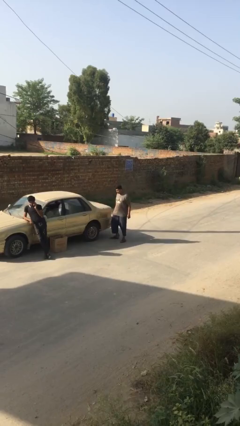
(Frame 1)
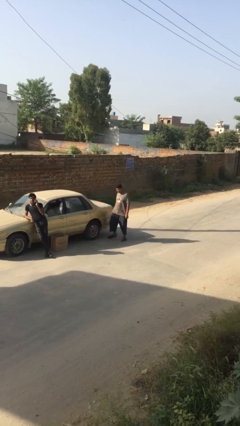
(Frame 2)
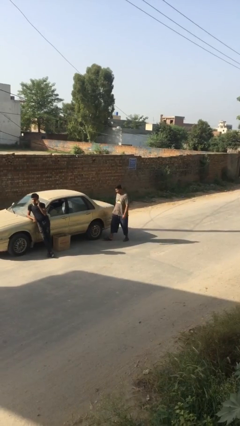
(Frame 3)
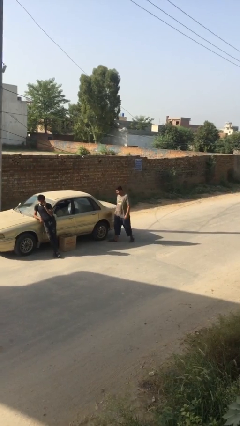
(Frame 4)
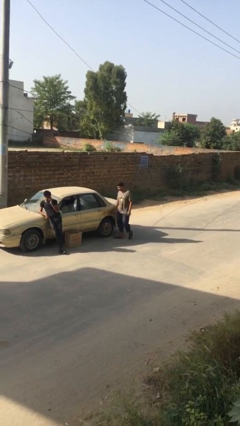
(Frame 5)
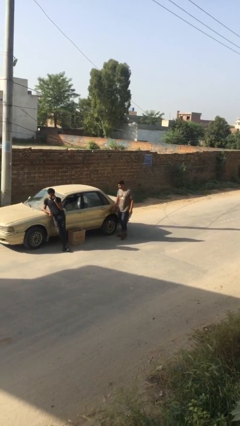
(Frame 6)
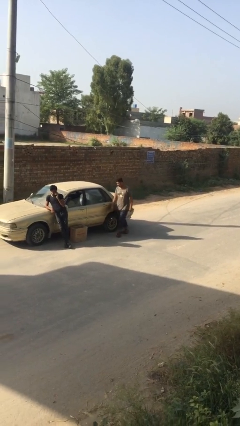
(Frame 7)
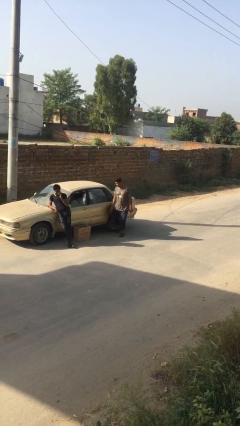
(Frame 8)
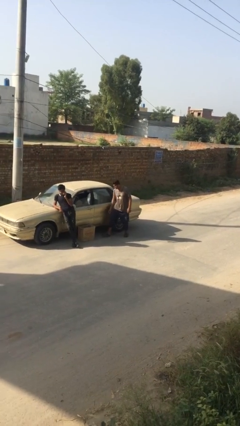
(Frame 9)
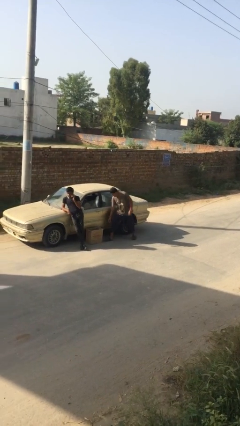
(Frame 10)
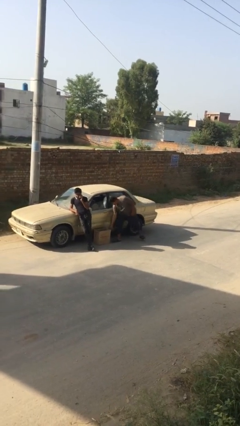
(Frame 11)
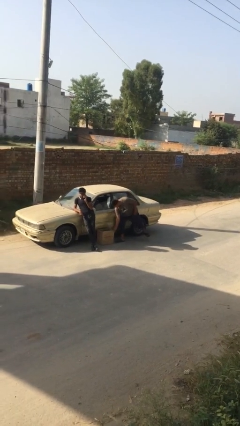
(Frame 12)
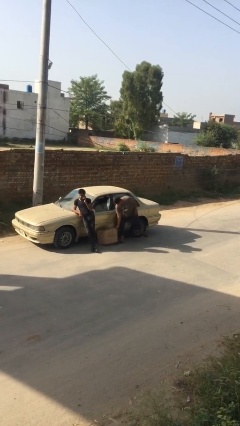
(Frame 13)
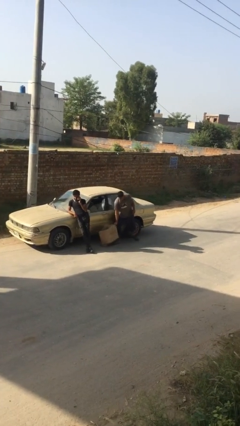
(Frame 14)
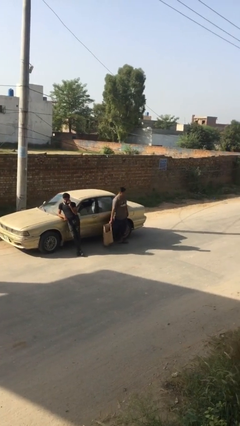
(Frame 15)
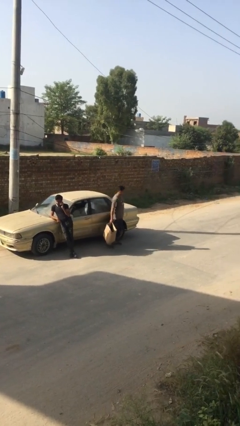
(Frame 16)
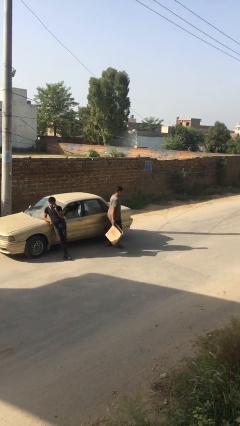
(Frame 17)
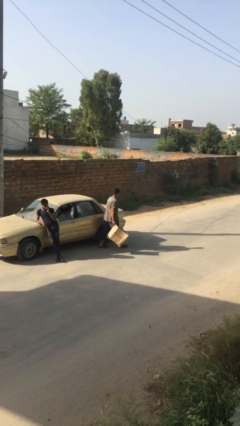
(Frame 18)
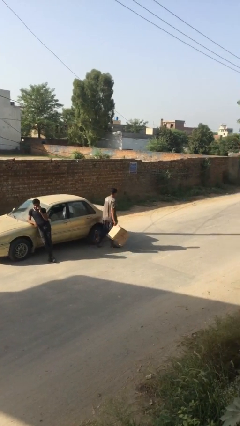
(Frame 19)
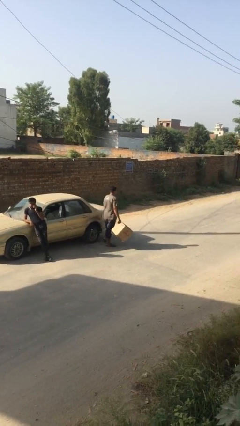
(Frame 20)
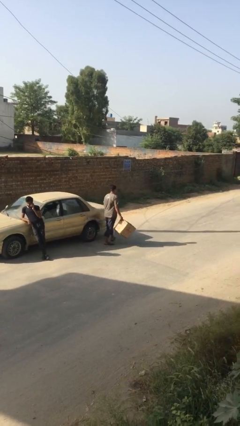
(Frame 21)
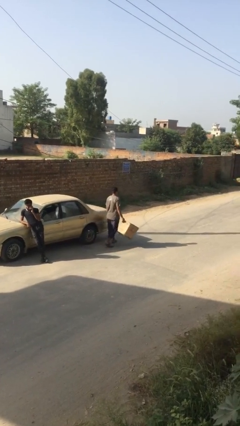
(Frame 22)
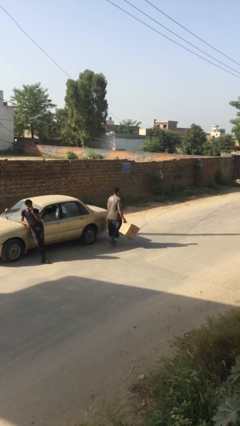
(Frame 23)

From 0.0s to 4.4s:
person steals object from person

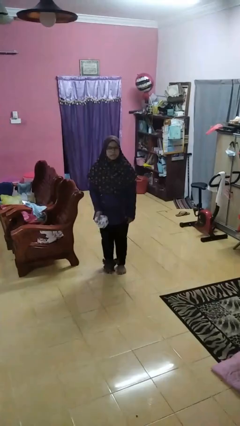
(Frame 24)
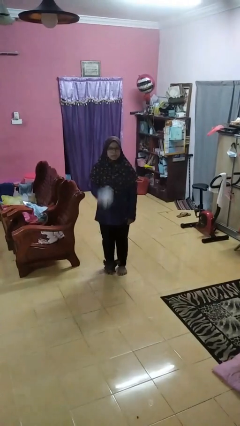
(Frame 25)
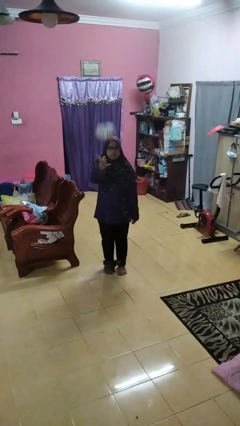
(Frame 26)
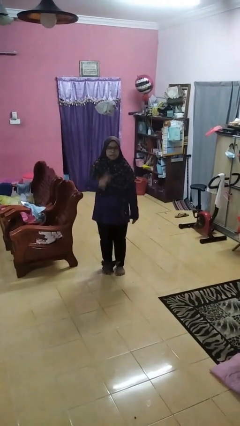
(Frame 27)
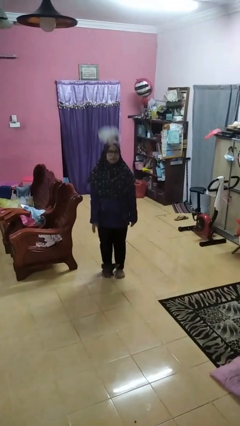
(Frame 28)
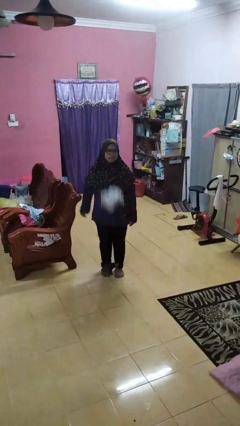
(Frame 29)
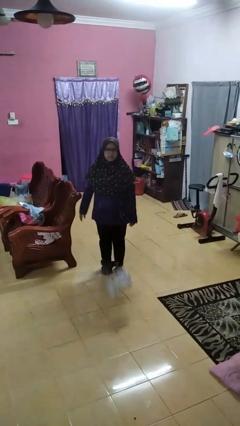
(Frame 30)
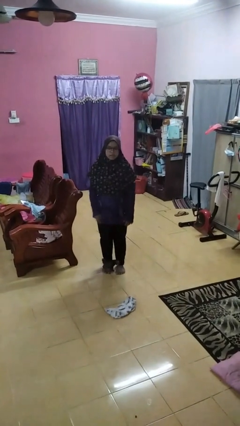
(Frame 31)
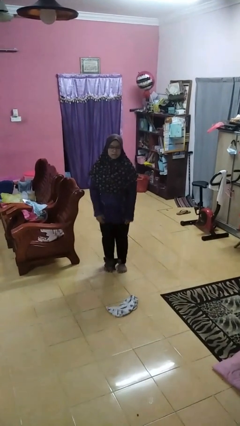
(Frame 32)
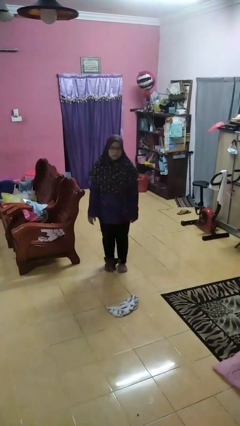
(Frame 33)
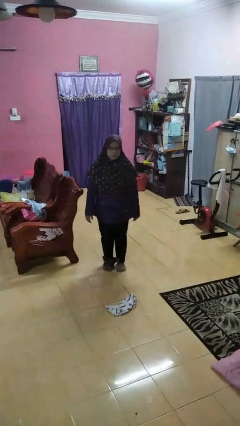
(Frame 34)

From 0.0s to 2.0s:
person throws object into air

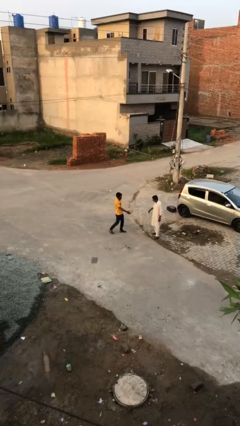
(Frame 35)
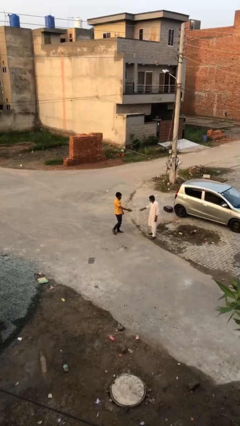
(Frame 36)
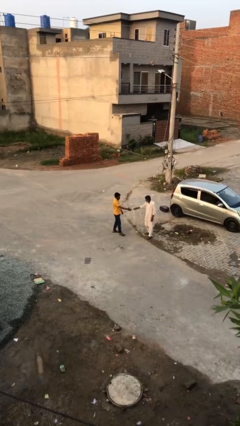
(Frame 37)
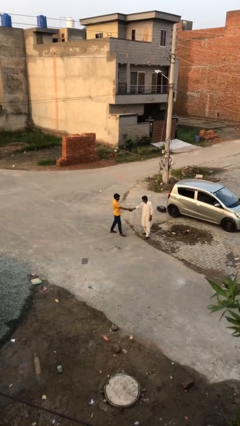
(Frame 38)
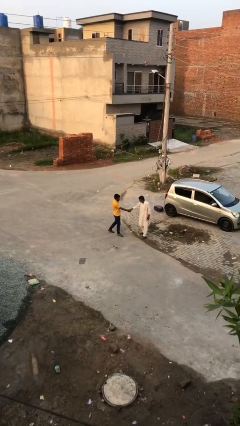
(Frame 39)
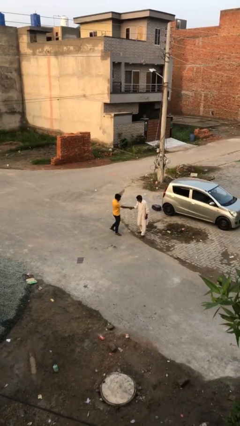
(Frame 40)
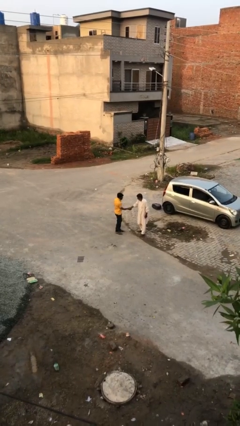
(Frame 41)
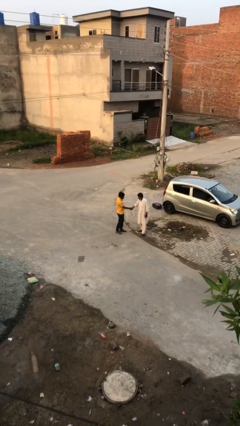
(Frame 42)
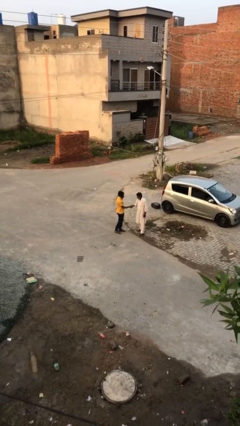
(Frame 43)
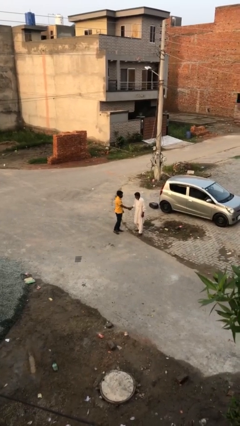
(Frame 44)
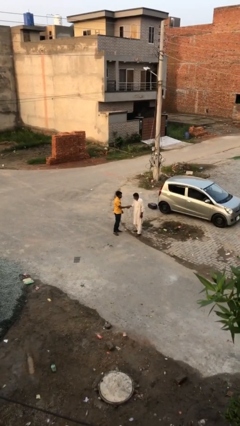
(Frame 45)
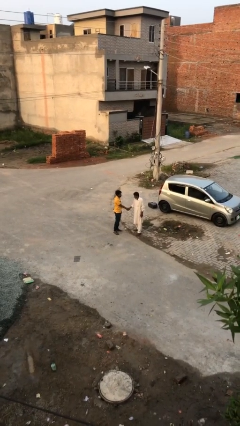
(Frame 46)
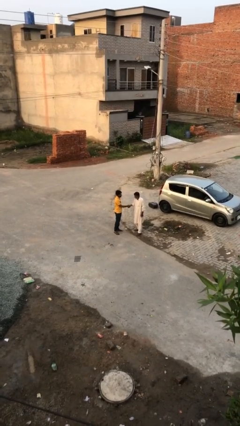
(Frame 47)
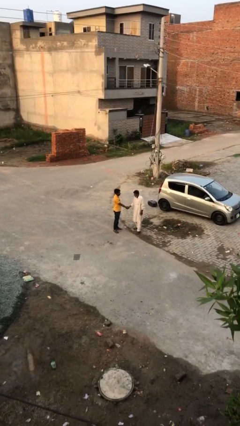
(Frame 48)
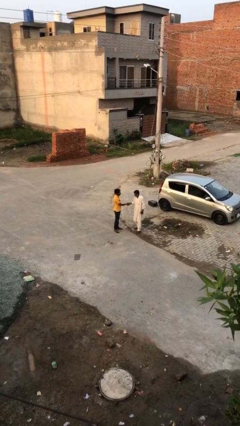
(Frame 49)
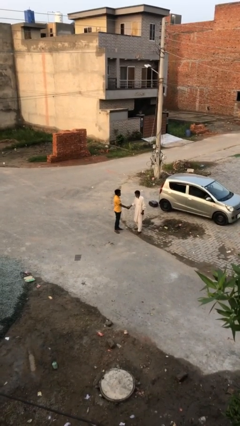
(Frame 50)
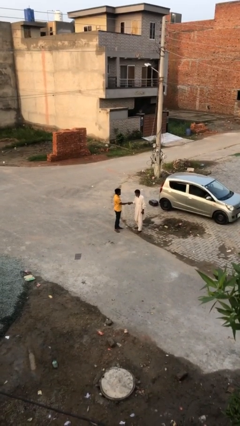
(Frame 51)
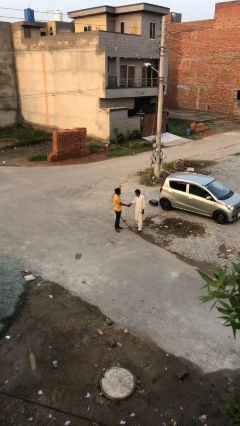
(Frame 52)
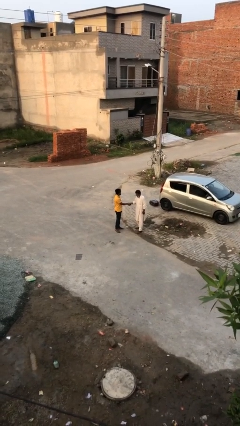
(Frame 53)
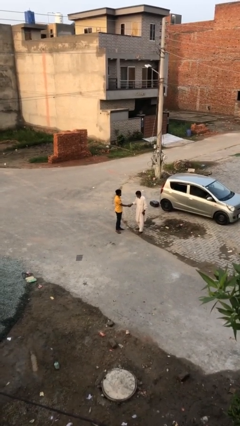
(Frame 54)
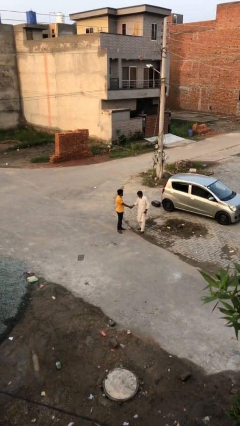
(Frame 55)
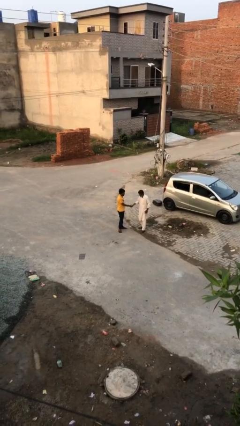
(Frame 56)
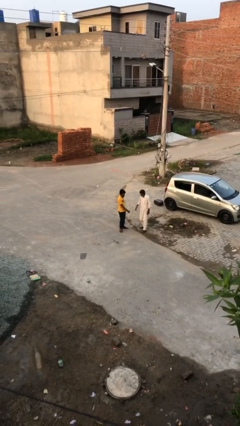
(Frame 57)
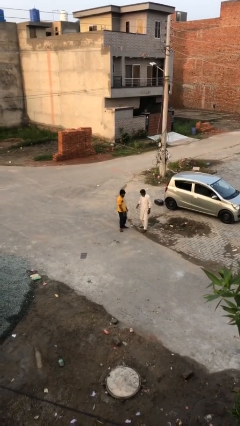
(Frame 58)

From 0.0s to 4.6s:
person shakes hand

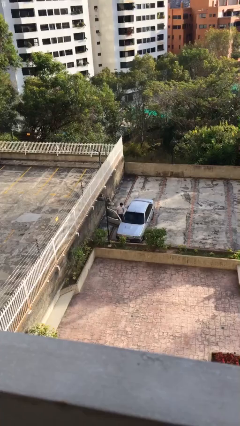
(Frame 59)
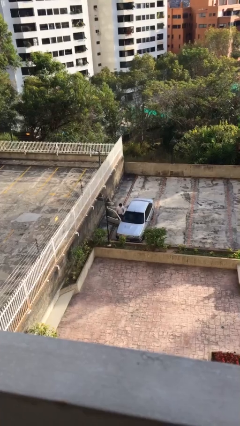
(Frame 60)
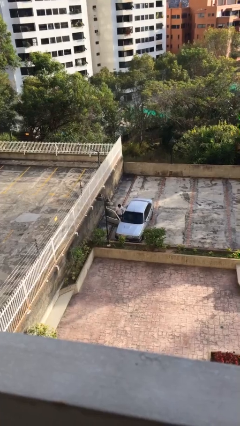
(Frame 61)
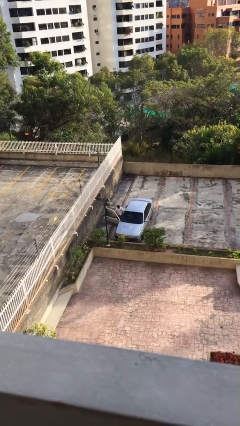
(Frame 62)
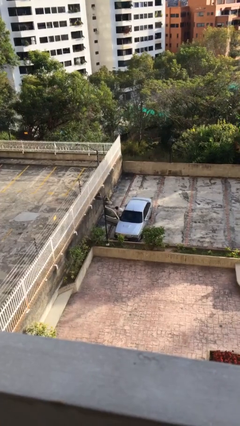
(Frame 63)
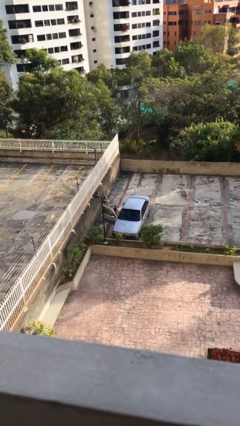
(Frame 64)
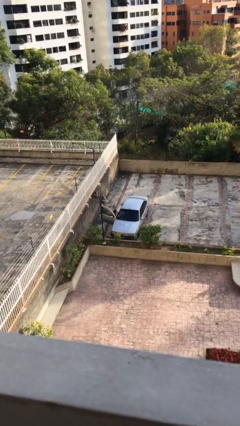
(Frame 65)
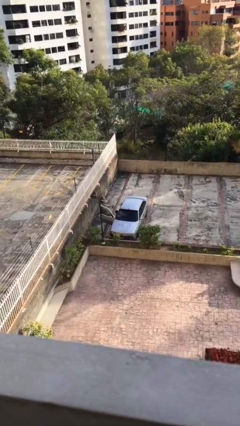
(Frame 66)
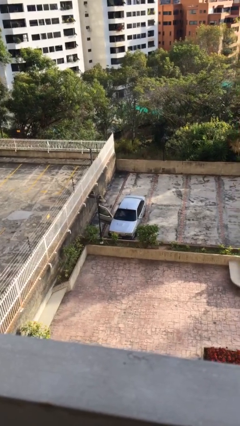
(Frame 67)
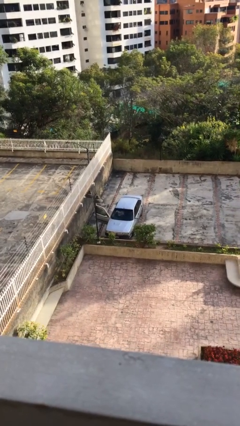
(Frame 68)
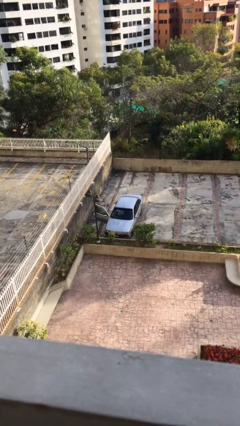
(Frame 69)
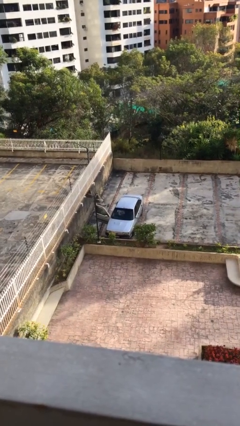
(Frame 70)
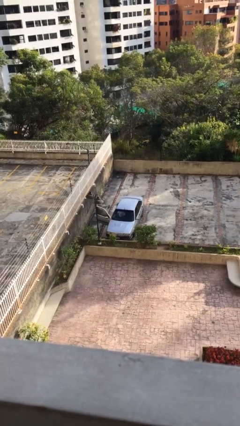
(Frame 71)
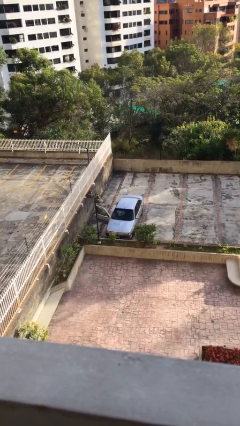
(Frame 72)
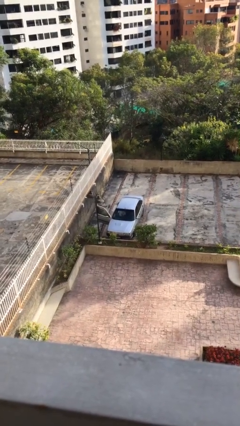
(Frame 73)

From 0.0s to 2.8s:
person enters car

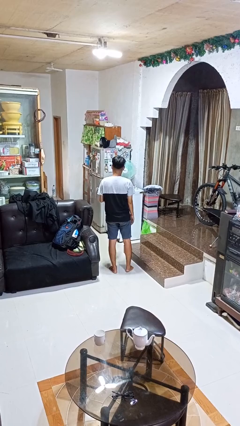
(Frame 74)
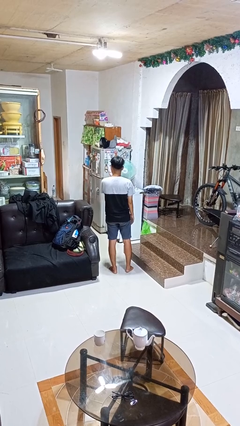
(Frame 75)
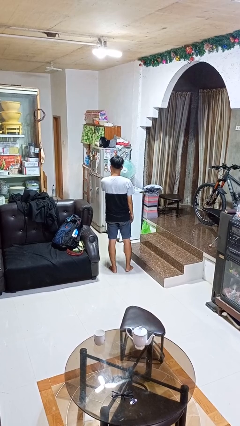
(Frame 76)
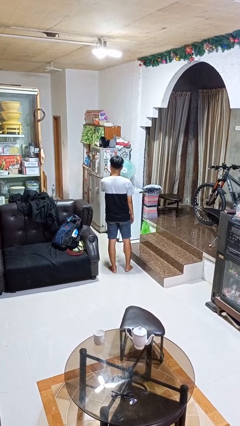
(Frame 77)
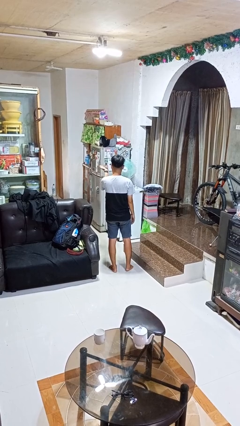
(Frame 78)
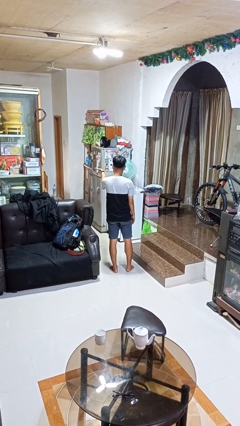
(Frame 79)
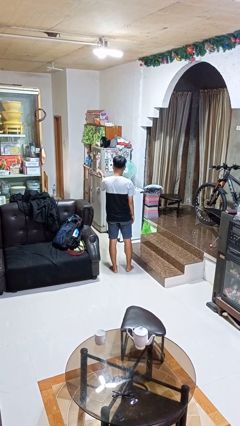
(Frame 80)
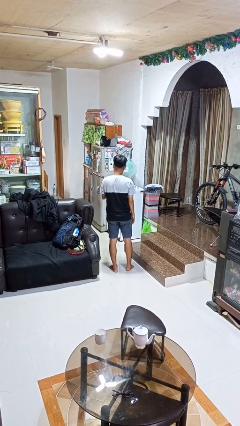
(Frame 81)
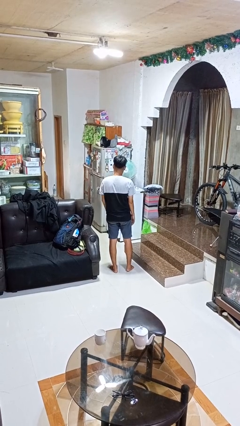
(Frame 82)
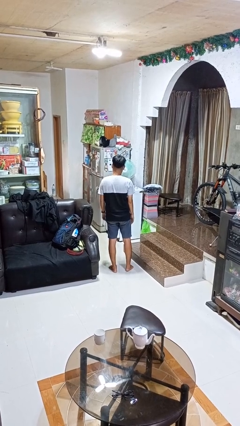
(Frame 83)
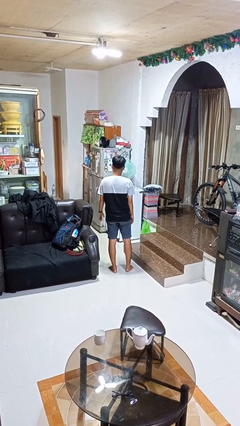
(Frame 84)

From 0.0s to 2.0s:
person gestures blow kiss

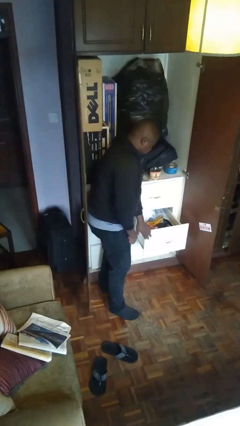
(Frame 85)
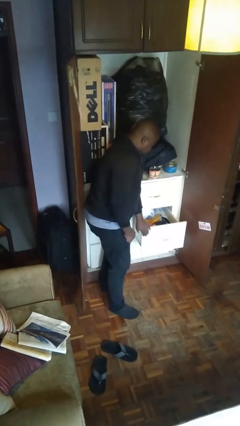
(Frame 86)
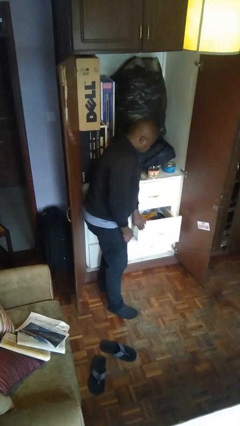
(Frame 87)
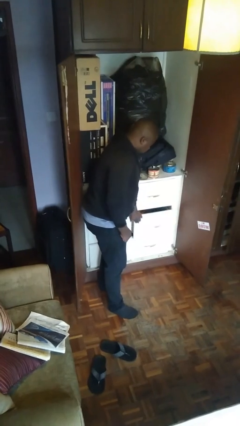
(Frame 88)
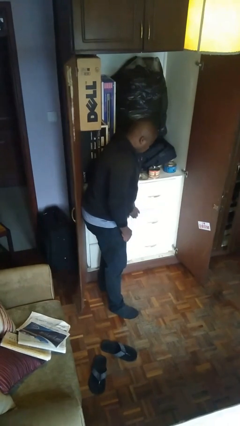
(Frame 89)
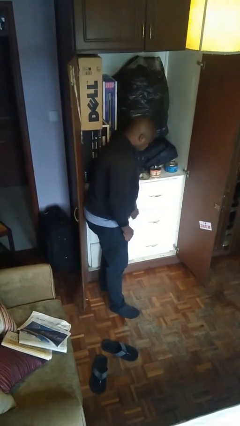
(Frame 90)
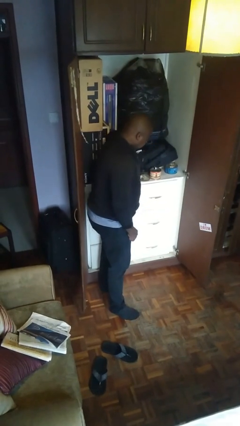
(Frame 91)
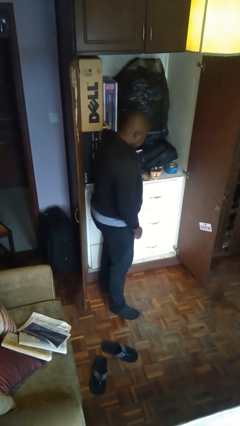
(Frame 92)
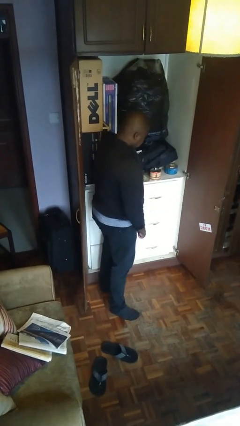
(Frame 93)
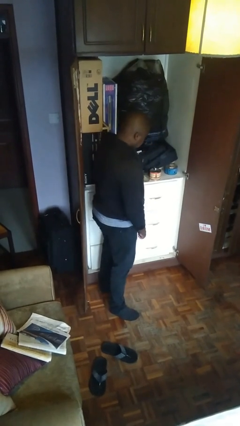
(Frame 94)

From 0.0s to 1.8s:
person closes dresser drawer
